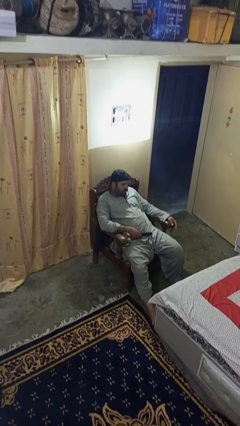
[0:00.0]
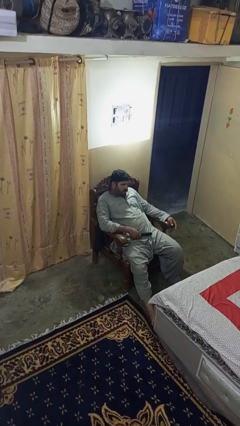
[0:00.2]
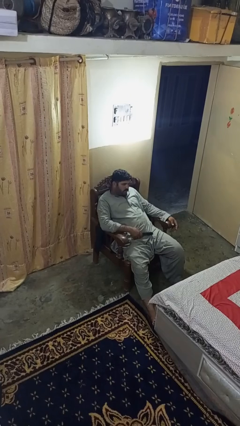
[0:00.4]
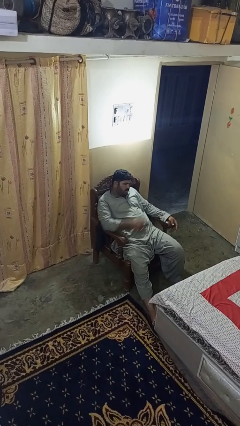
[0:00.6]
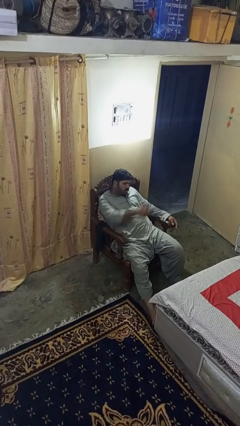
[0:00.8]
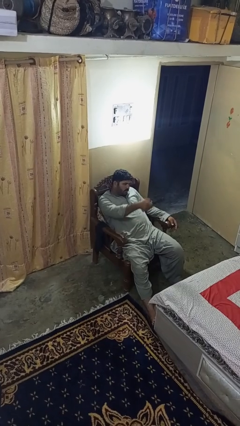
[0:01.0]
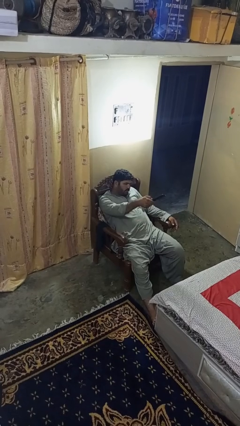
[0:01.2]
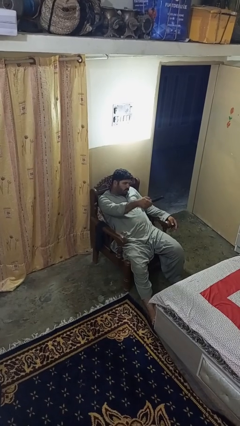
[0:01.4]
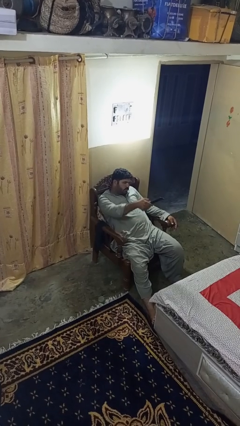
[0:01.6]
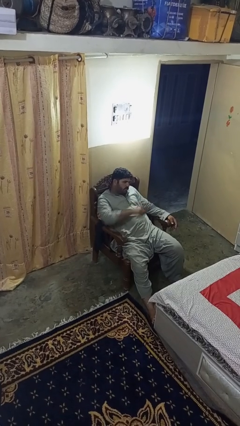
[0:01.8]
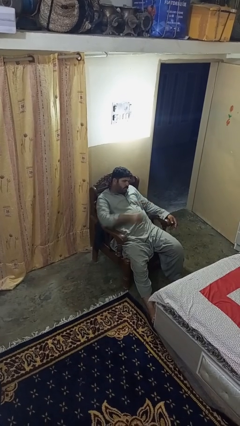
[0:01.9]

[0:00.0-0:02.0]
person uses television remote

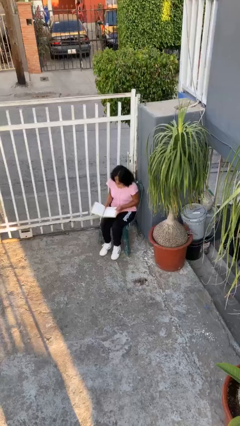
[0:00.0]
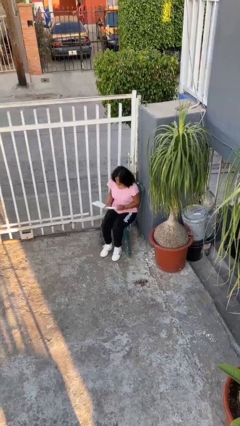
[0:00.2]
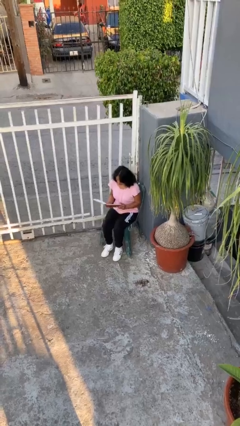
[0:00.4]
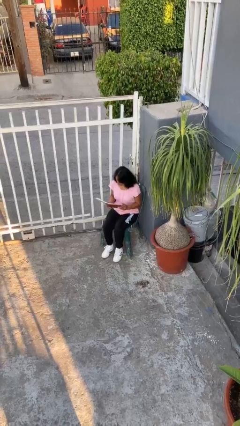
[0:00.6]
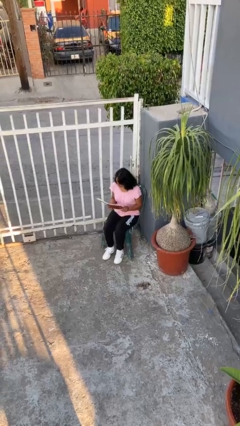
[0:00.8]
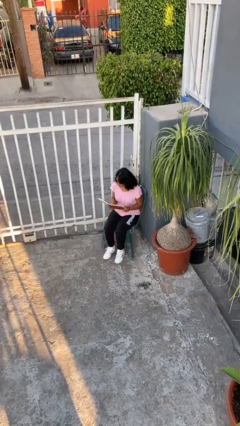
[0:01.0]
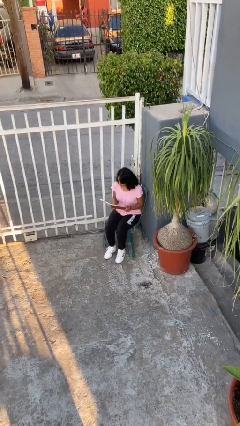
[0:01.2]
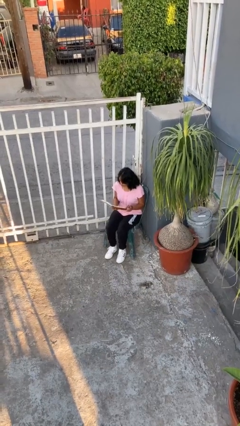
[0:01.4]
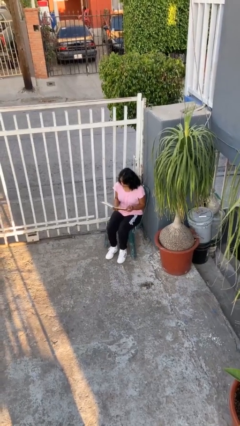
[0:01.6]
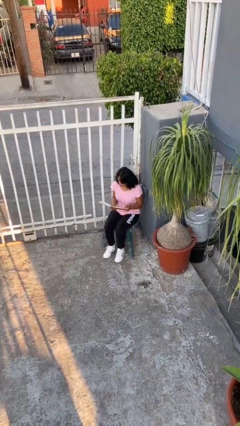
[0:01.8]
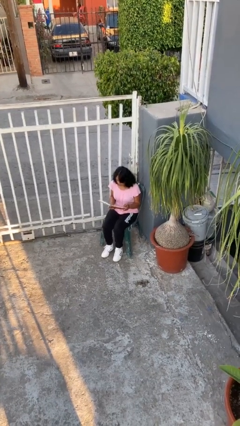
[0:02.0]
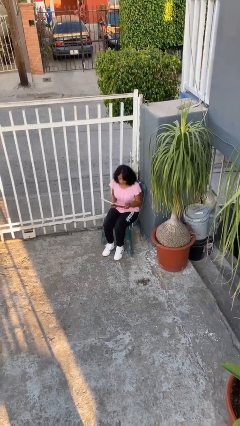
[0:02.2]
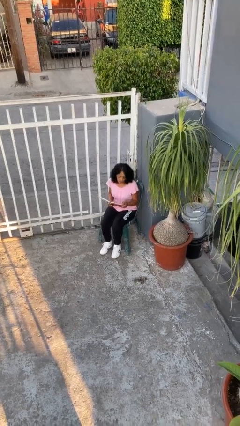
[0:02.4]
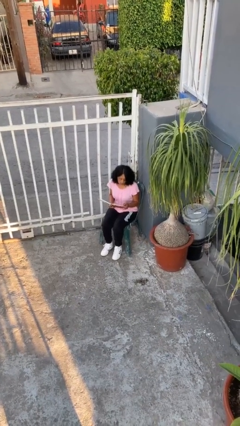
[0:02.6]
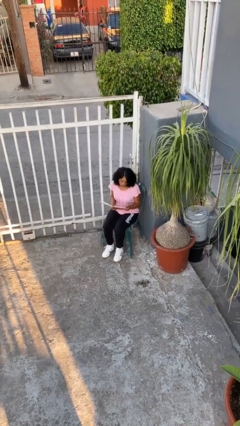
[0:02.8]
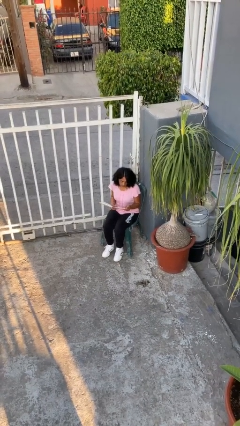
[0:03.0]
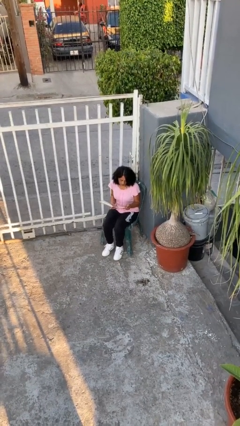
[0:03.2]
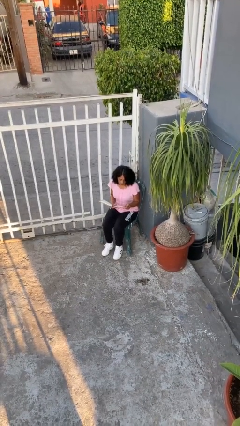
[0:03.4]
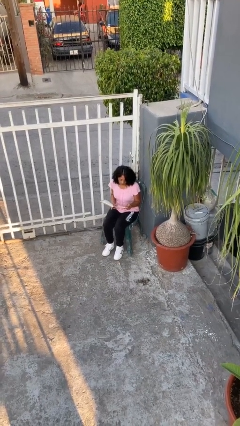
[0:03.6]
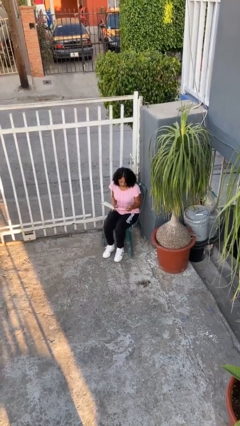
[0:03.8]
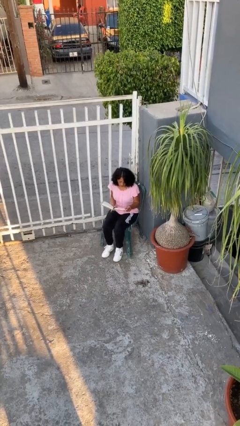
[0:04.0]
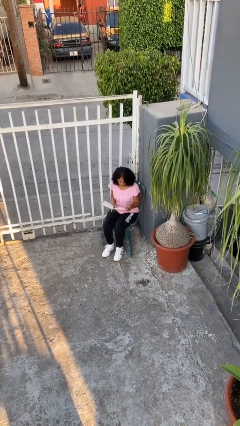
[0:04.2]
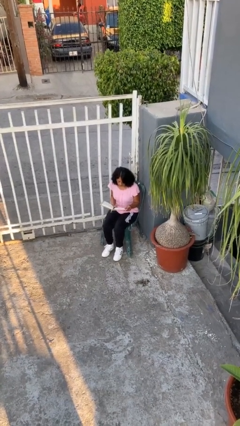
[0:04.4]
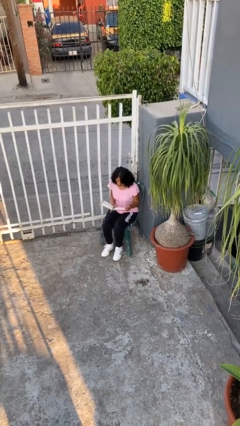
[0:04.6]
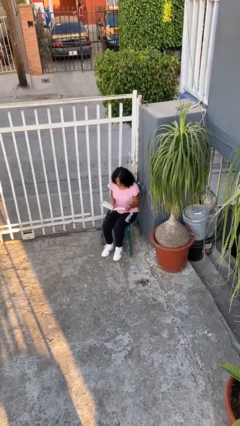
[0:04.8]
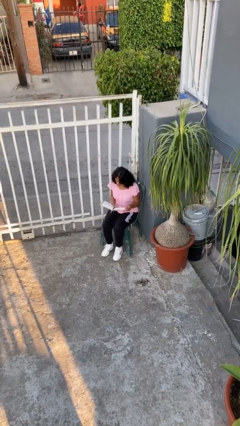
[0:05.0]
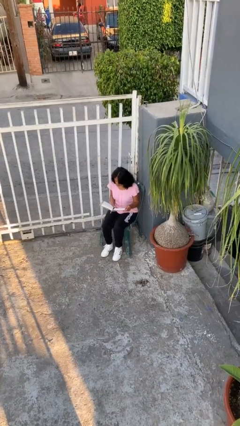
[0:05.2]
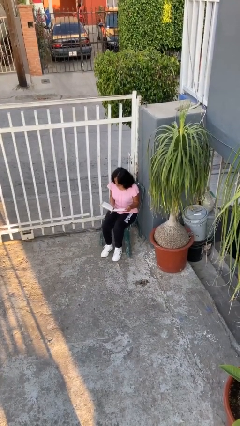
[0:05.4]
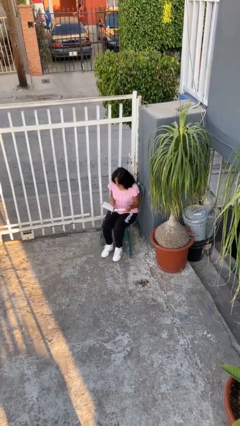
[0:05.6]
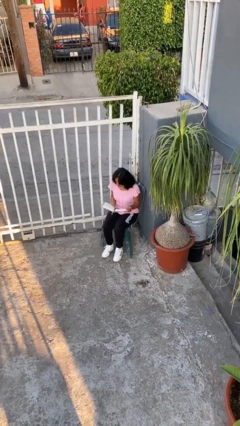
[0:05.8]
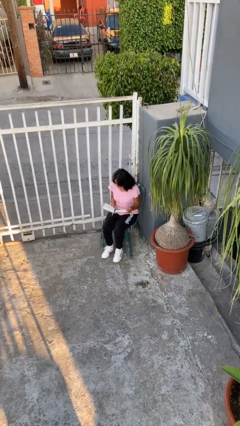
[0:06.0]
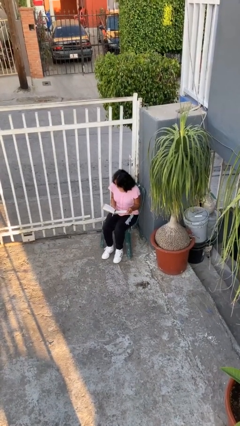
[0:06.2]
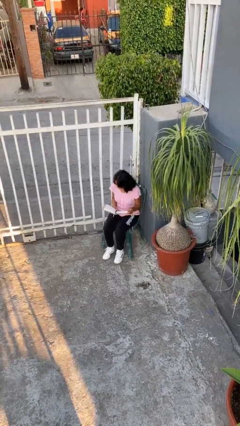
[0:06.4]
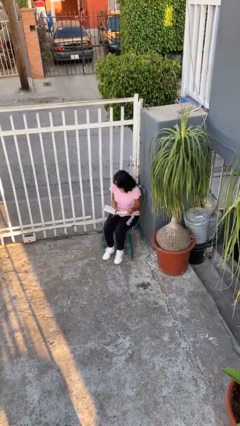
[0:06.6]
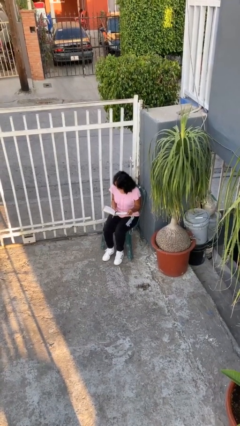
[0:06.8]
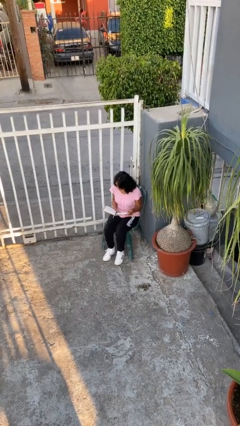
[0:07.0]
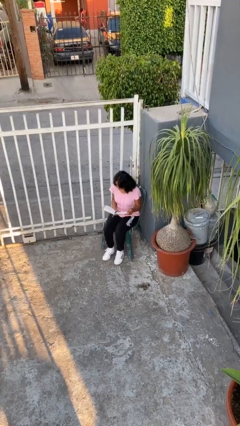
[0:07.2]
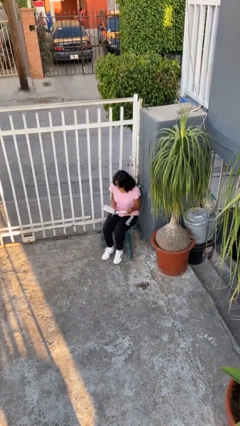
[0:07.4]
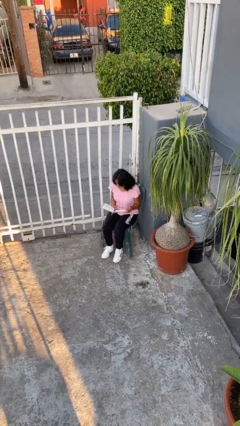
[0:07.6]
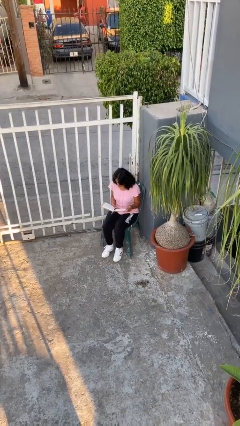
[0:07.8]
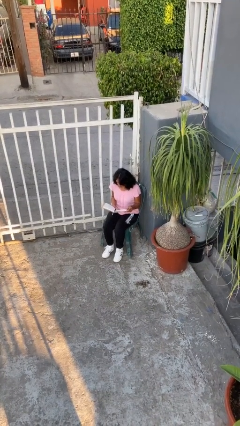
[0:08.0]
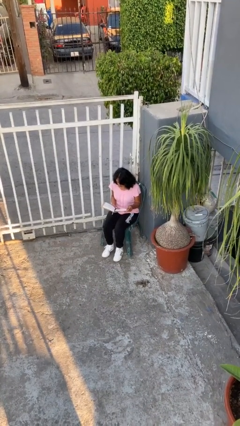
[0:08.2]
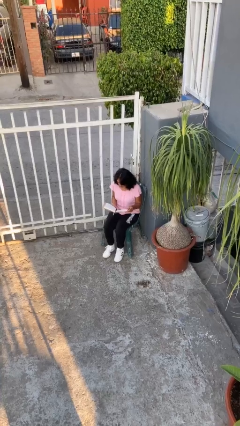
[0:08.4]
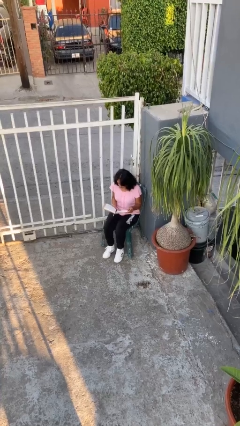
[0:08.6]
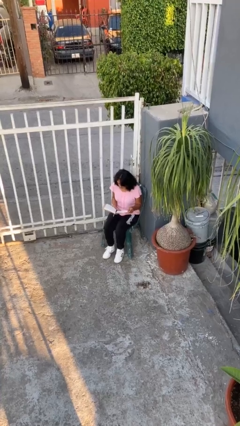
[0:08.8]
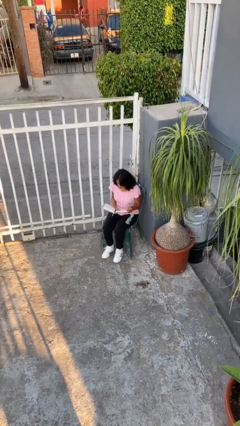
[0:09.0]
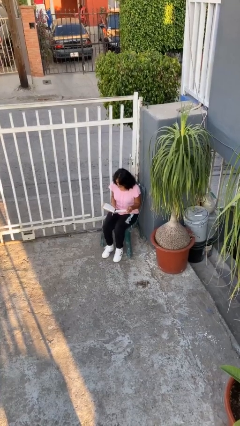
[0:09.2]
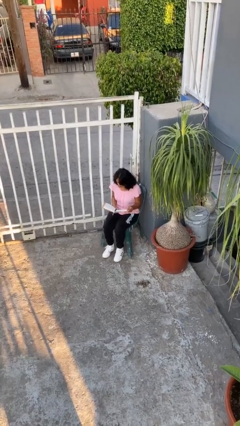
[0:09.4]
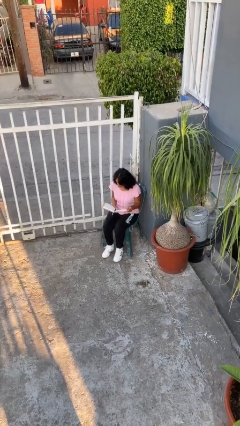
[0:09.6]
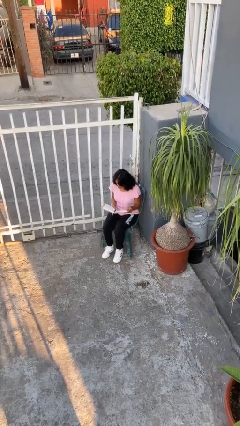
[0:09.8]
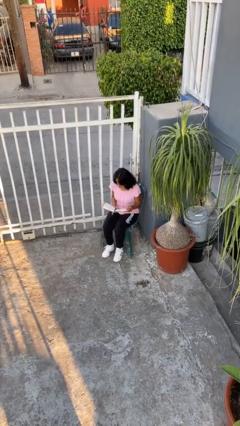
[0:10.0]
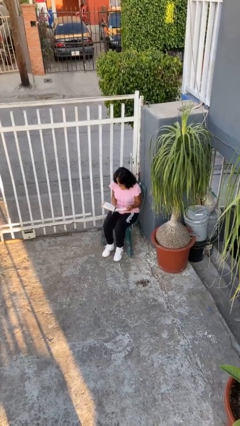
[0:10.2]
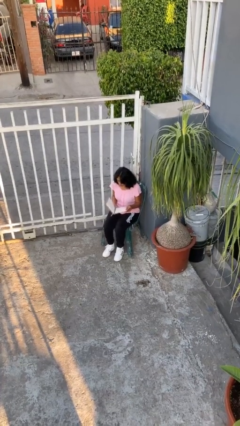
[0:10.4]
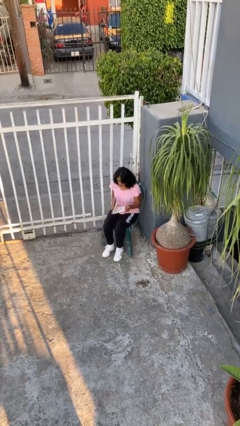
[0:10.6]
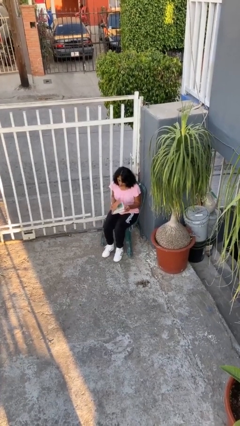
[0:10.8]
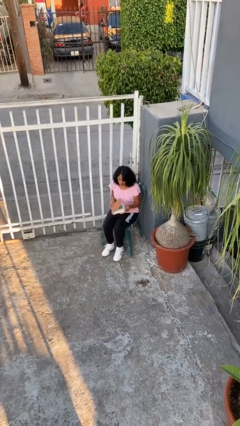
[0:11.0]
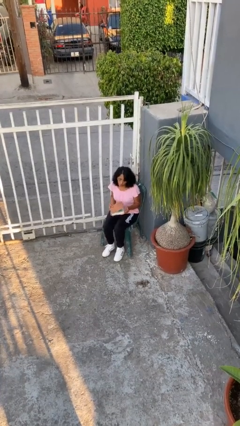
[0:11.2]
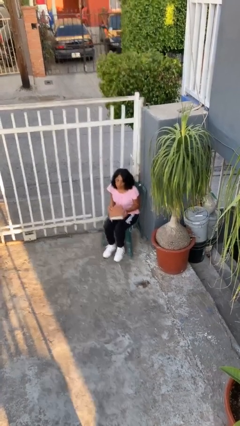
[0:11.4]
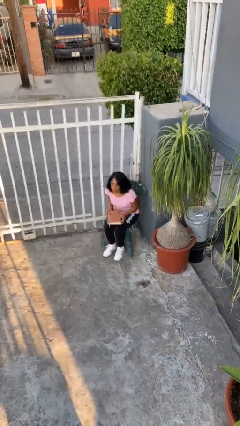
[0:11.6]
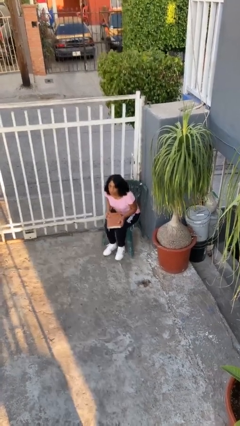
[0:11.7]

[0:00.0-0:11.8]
person reads document

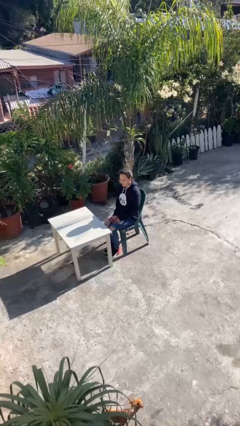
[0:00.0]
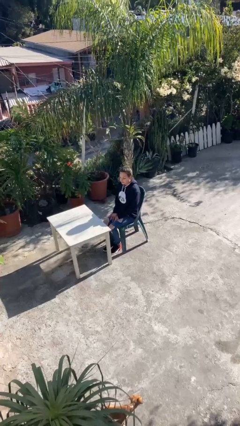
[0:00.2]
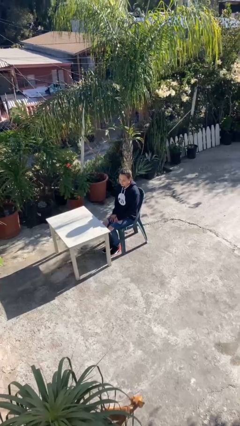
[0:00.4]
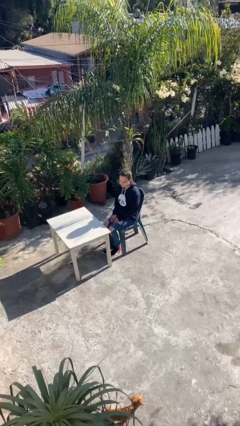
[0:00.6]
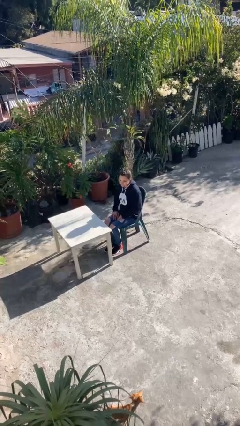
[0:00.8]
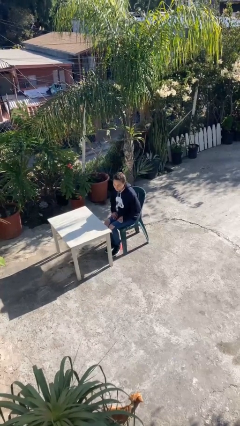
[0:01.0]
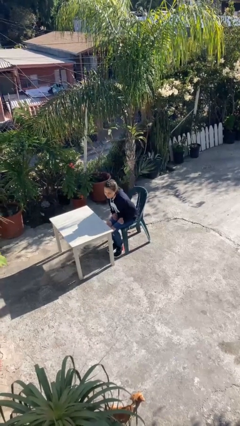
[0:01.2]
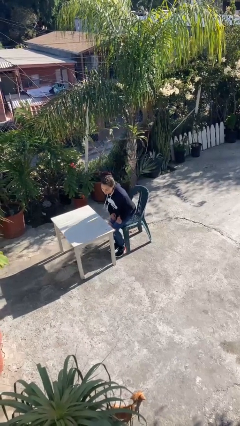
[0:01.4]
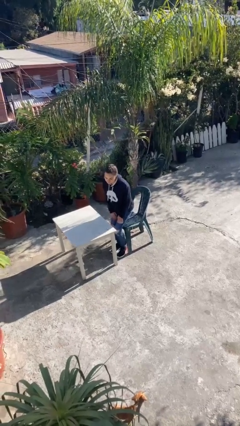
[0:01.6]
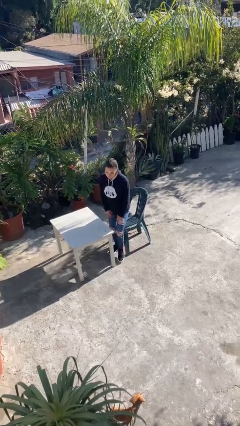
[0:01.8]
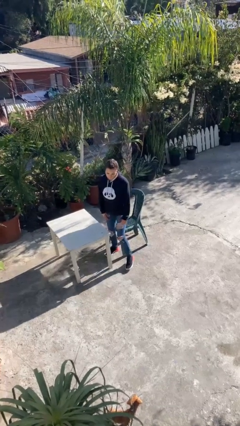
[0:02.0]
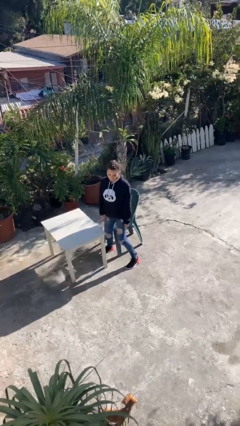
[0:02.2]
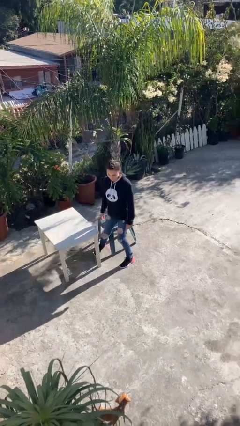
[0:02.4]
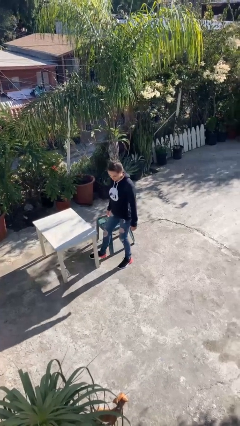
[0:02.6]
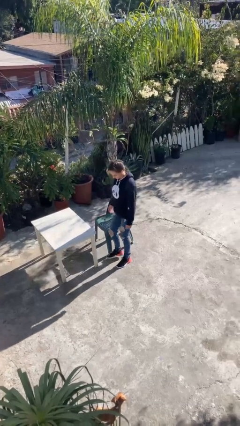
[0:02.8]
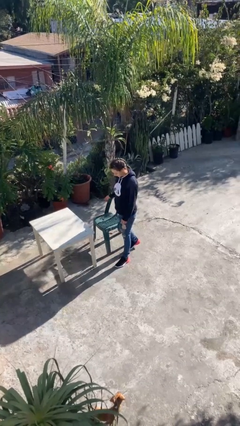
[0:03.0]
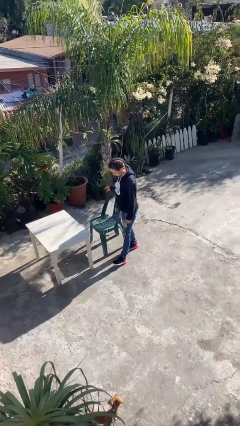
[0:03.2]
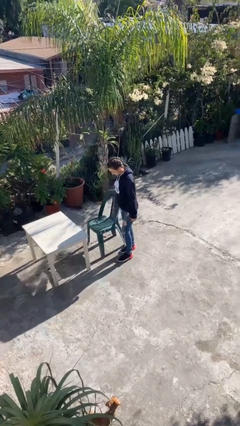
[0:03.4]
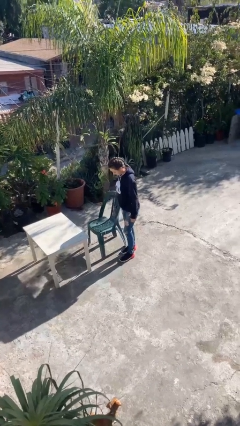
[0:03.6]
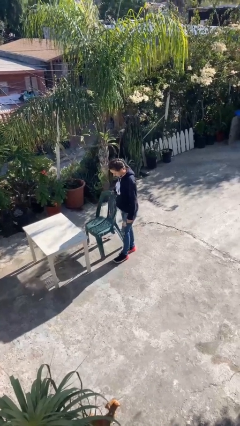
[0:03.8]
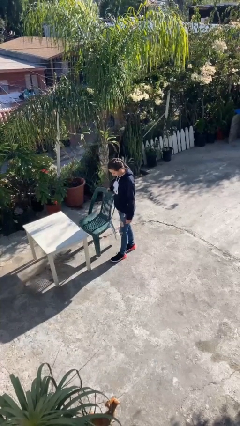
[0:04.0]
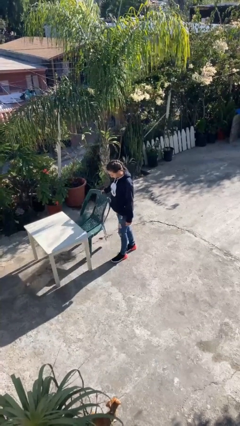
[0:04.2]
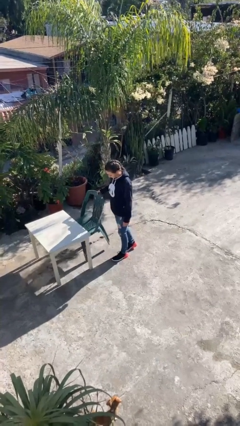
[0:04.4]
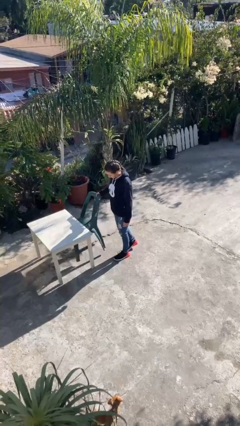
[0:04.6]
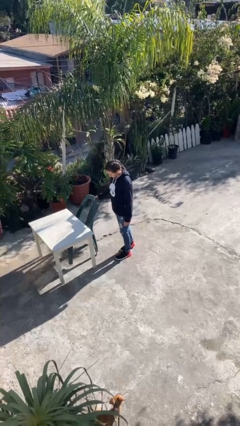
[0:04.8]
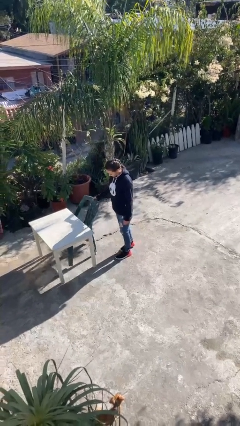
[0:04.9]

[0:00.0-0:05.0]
person stands up
